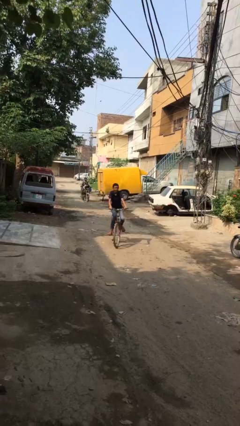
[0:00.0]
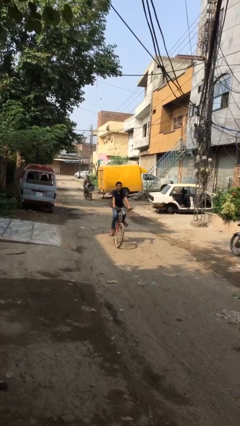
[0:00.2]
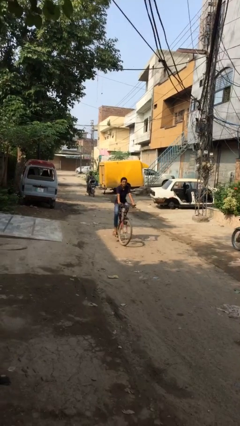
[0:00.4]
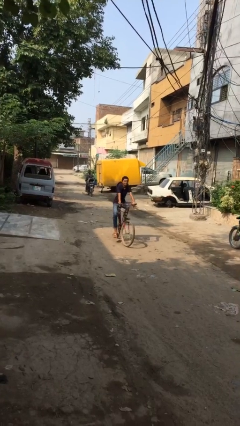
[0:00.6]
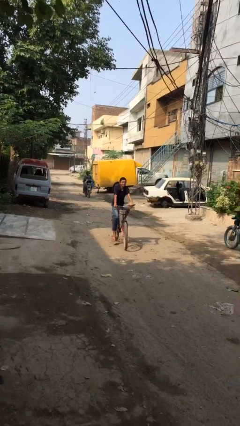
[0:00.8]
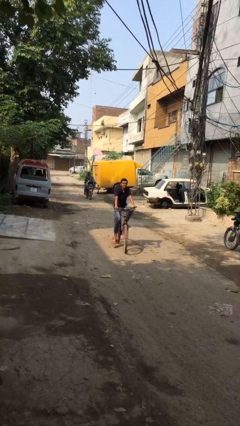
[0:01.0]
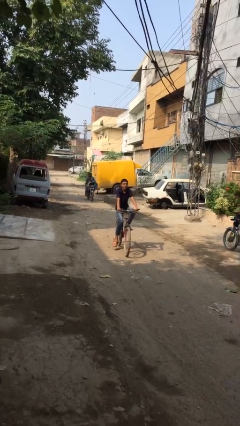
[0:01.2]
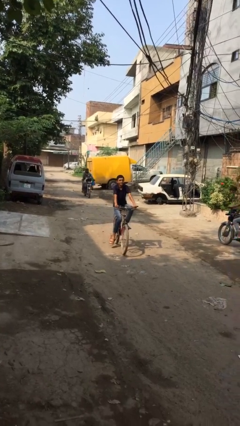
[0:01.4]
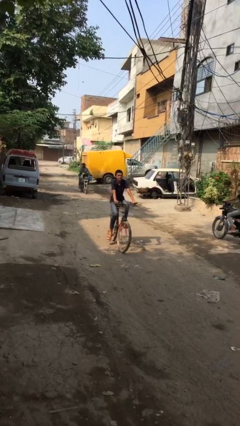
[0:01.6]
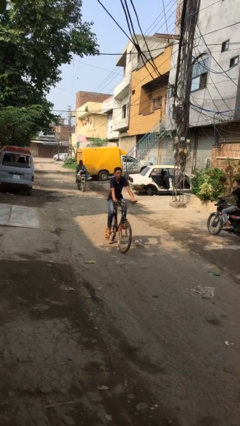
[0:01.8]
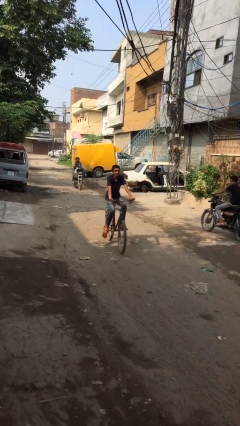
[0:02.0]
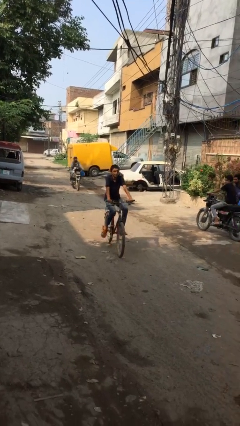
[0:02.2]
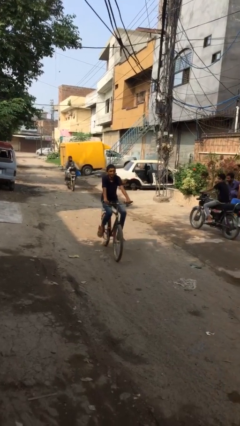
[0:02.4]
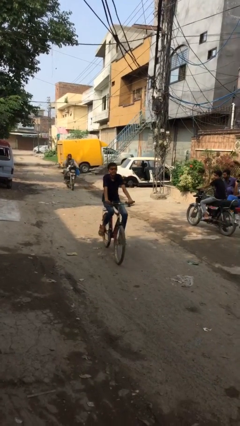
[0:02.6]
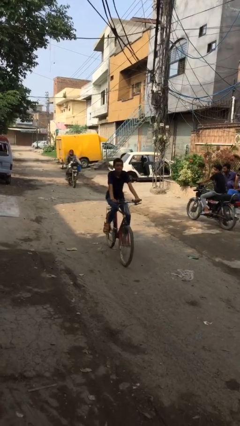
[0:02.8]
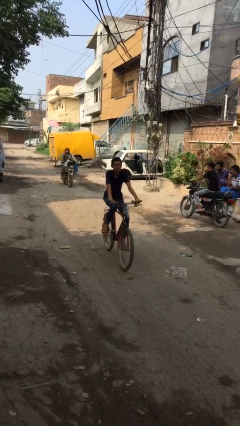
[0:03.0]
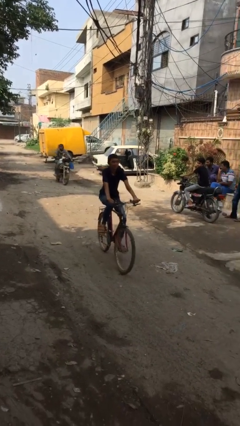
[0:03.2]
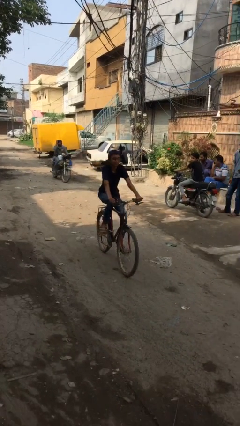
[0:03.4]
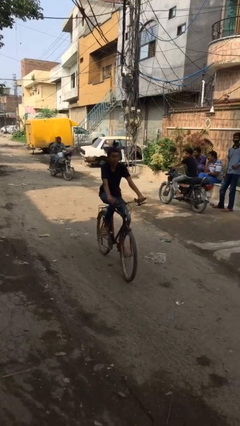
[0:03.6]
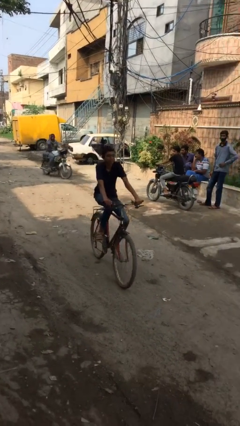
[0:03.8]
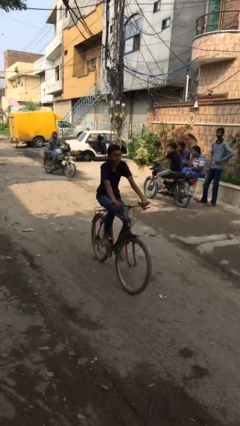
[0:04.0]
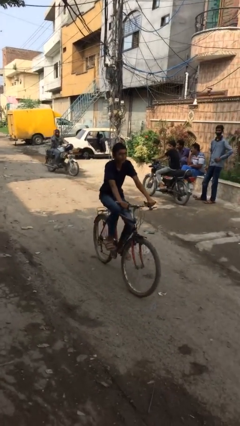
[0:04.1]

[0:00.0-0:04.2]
person rides bicycle

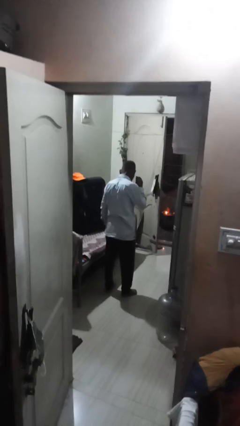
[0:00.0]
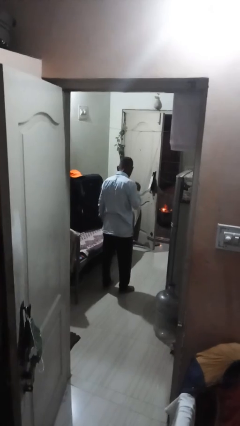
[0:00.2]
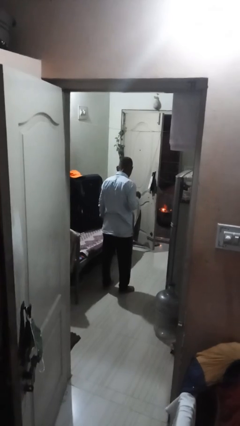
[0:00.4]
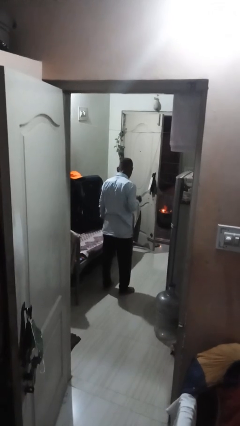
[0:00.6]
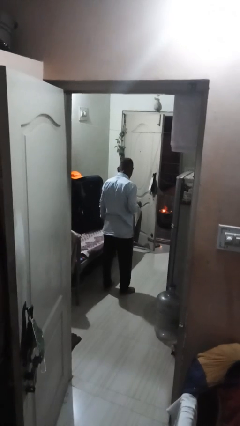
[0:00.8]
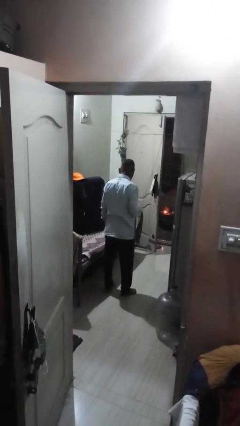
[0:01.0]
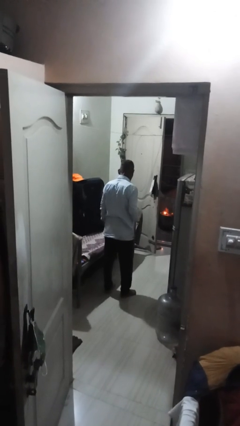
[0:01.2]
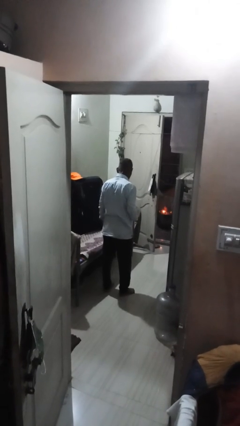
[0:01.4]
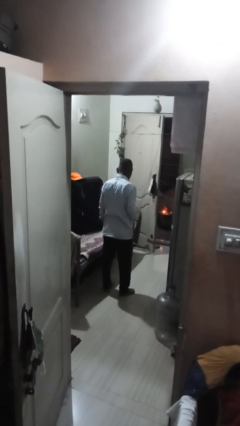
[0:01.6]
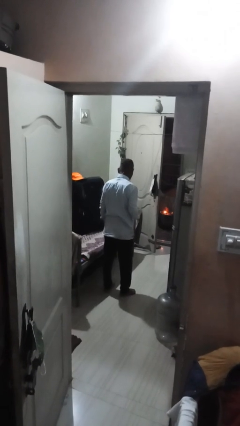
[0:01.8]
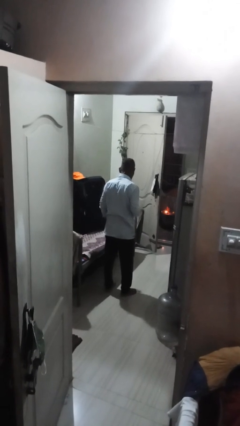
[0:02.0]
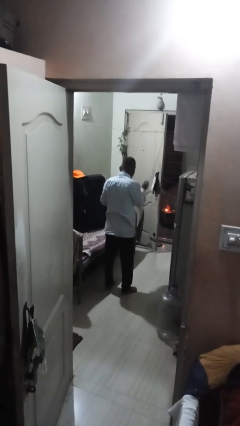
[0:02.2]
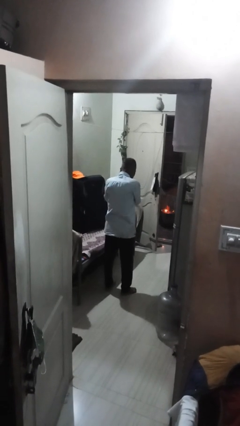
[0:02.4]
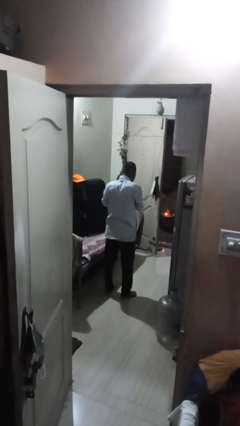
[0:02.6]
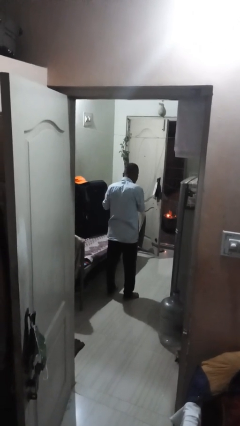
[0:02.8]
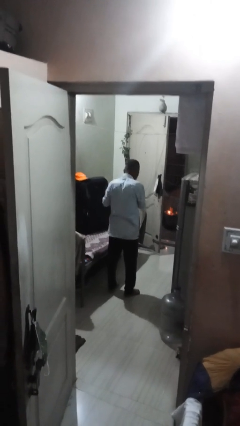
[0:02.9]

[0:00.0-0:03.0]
person swats bug

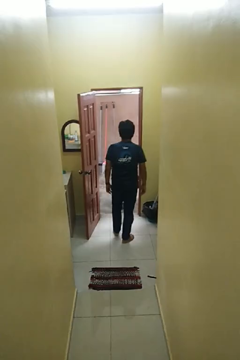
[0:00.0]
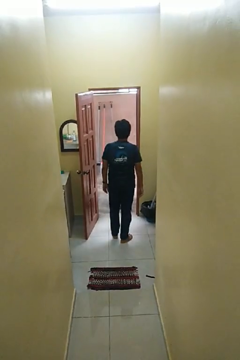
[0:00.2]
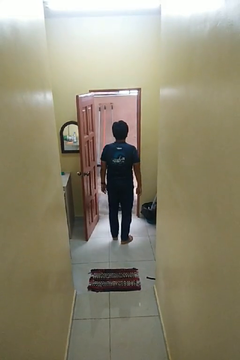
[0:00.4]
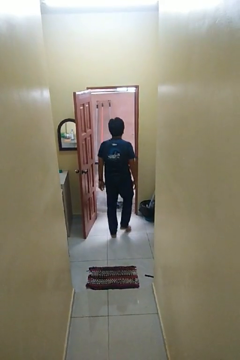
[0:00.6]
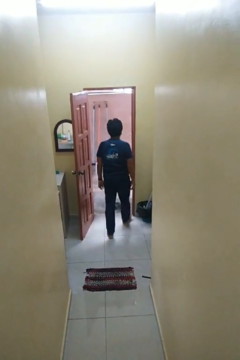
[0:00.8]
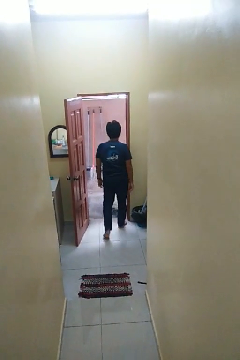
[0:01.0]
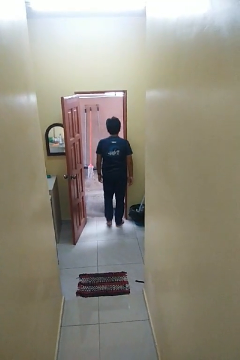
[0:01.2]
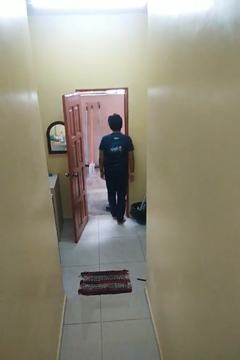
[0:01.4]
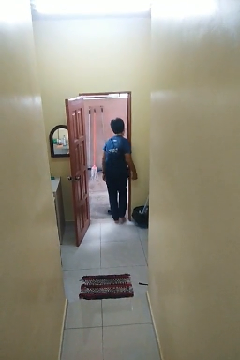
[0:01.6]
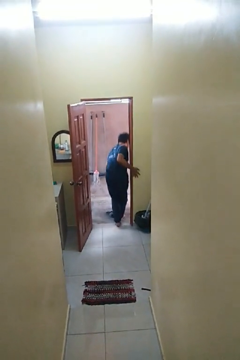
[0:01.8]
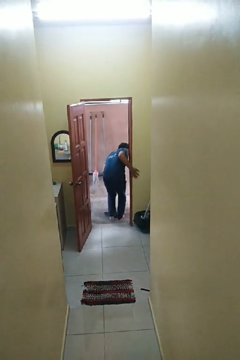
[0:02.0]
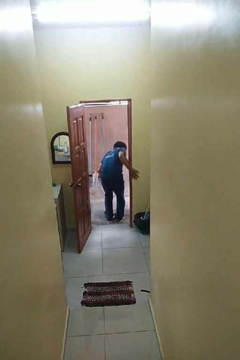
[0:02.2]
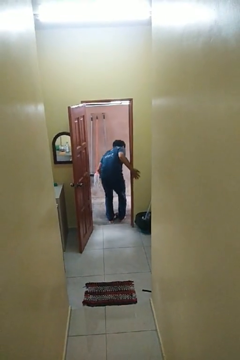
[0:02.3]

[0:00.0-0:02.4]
person bumps into wall

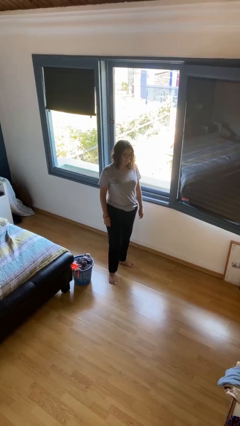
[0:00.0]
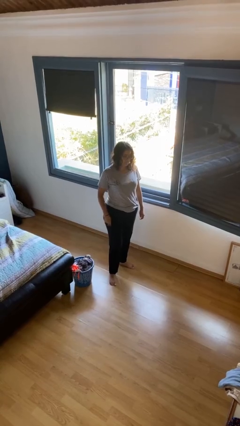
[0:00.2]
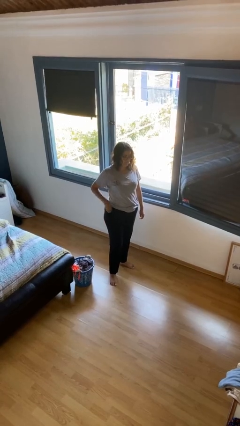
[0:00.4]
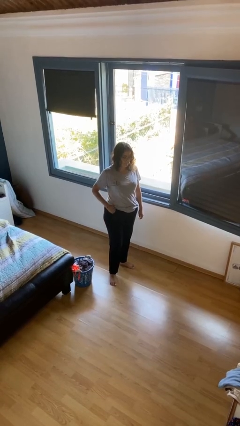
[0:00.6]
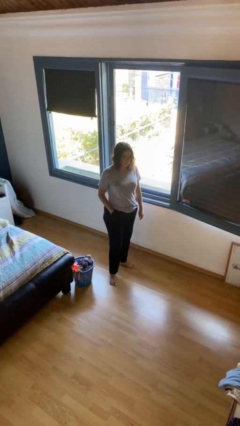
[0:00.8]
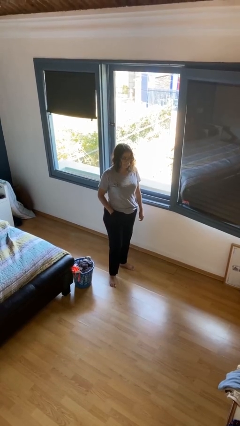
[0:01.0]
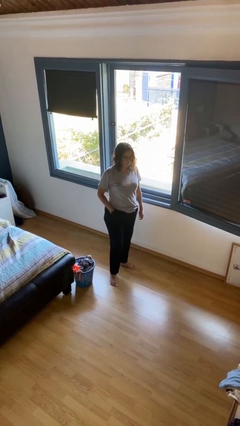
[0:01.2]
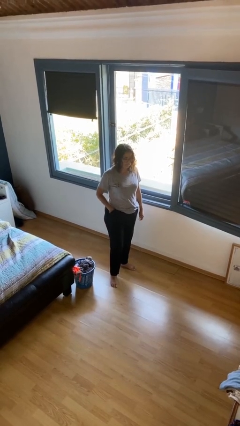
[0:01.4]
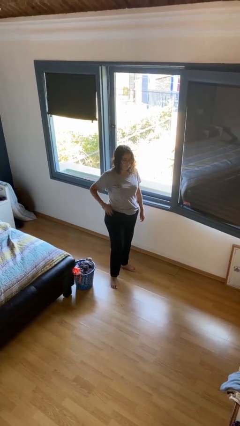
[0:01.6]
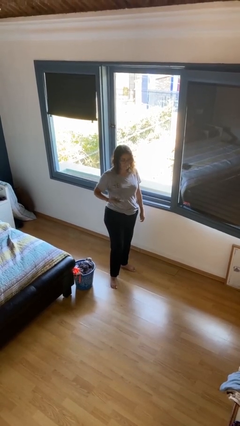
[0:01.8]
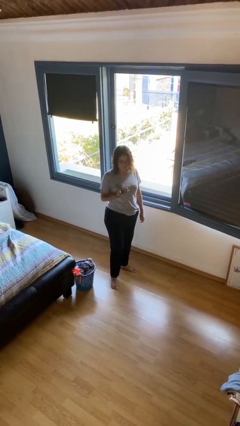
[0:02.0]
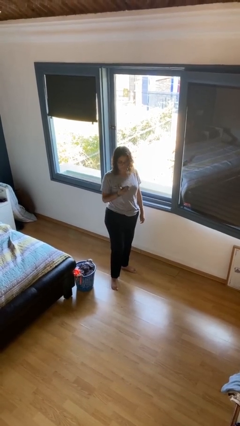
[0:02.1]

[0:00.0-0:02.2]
person takes phone from pocket

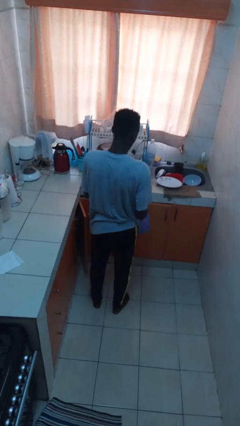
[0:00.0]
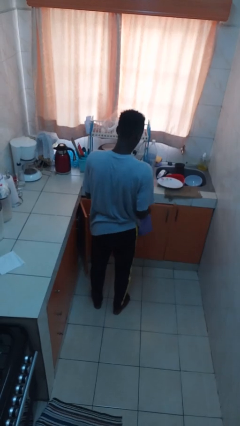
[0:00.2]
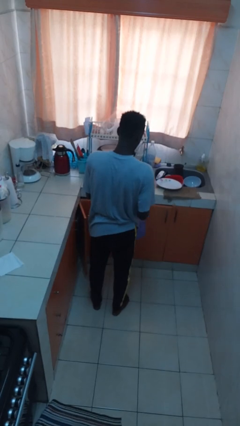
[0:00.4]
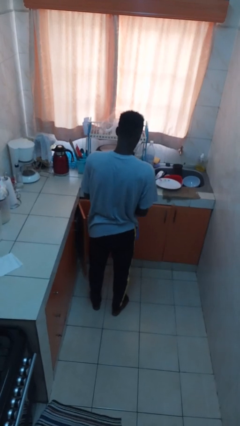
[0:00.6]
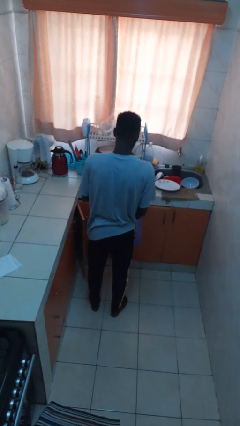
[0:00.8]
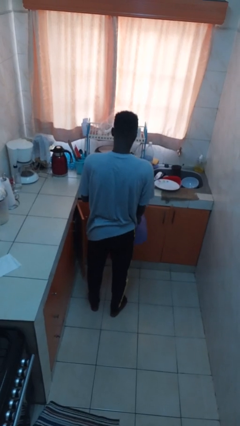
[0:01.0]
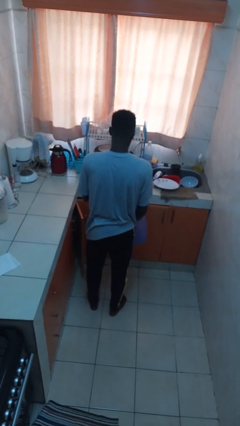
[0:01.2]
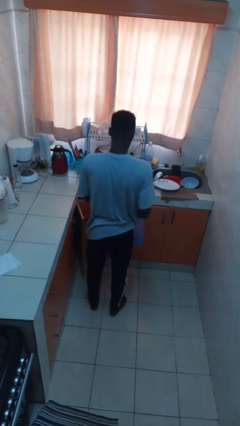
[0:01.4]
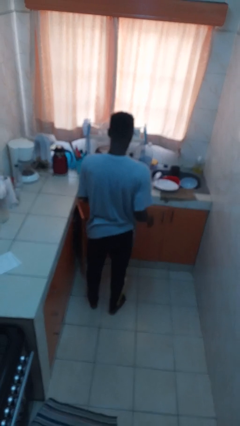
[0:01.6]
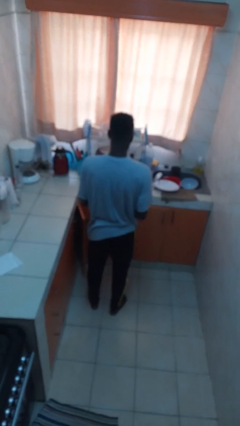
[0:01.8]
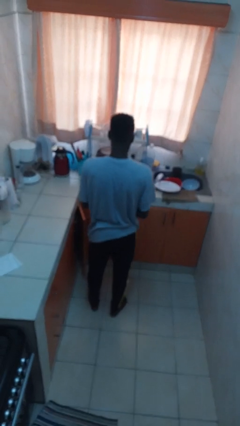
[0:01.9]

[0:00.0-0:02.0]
person puts object into bag

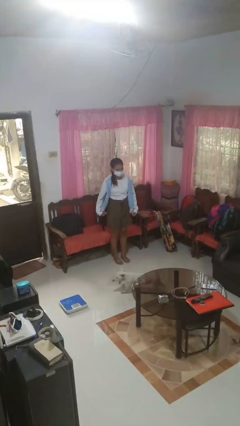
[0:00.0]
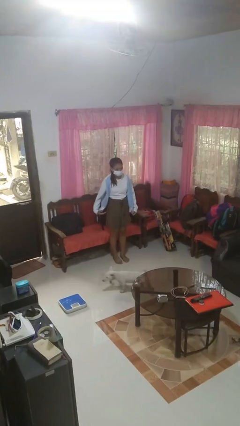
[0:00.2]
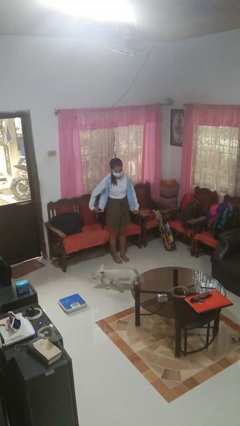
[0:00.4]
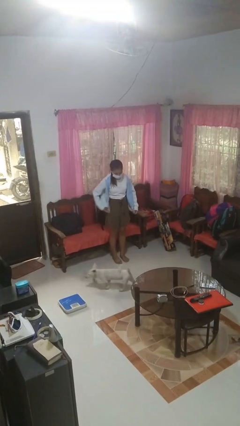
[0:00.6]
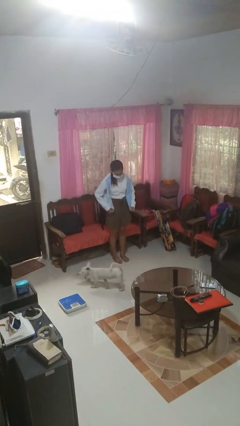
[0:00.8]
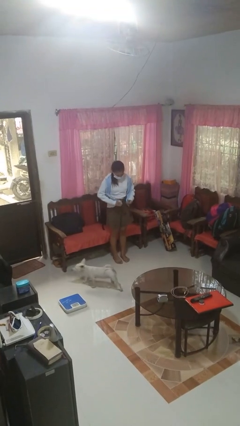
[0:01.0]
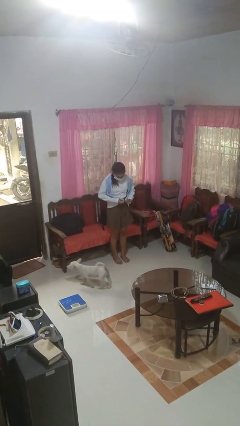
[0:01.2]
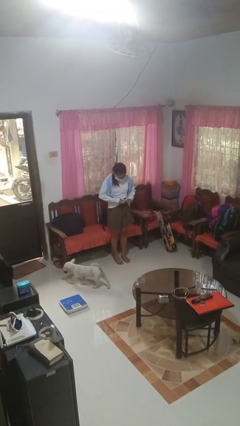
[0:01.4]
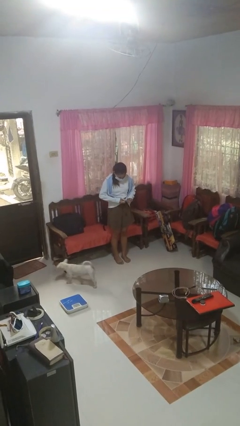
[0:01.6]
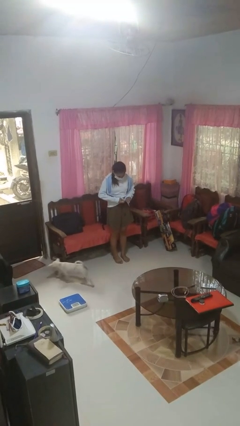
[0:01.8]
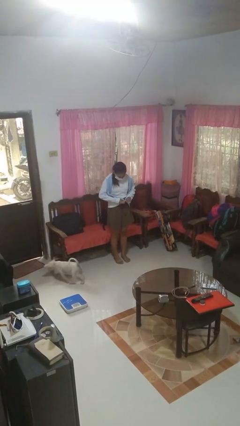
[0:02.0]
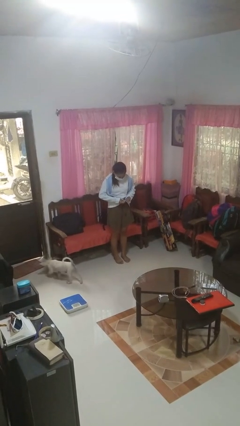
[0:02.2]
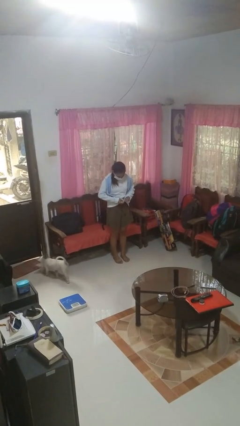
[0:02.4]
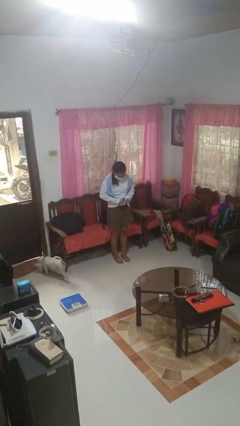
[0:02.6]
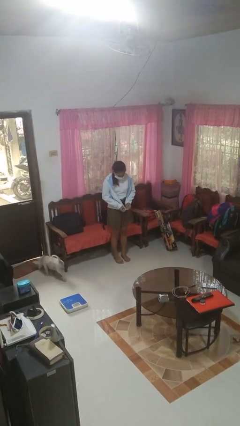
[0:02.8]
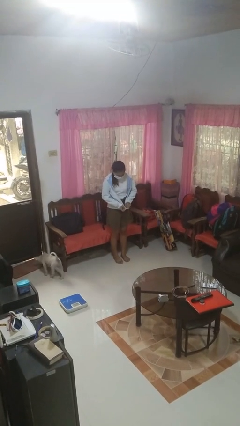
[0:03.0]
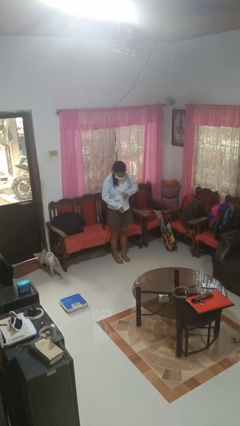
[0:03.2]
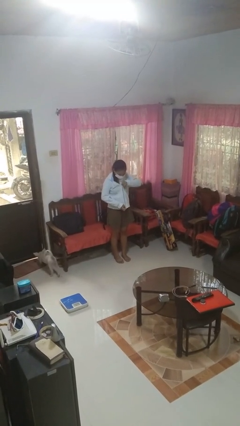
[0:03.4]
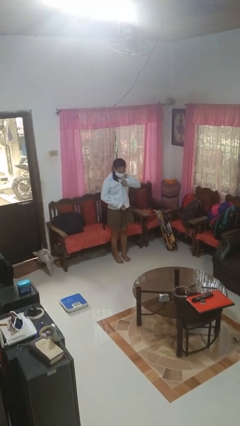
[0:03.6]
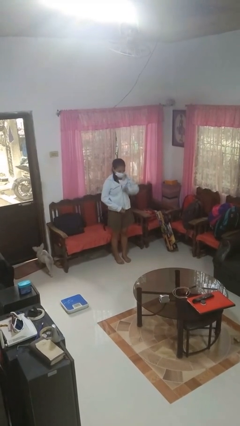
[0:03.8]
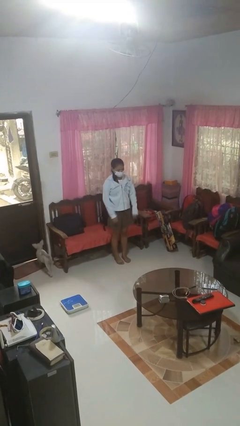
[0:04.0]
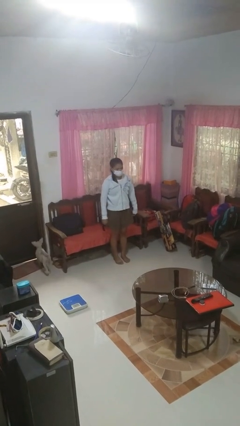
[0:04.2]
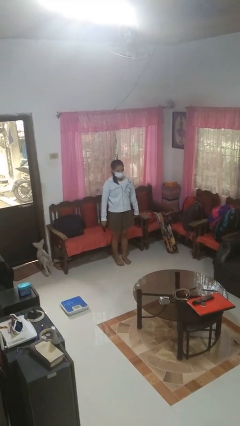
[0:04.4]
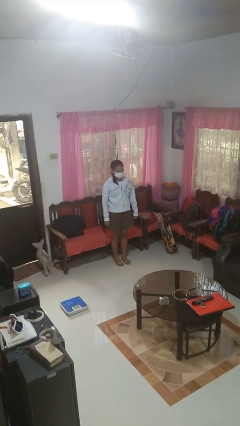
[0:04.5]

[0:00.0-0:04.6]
person zips up jacket
